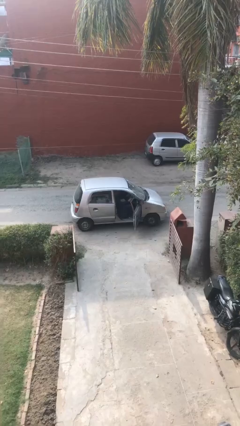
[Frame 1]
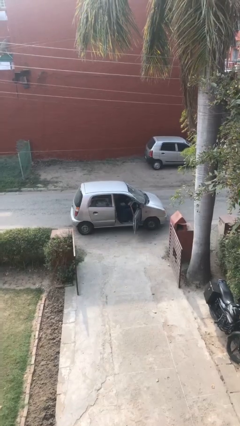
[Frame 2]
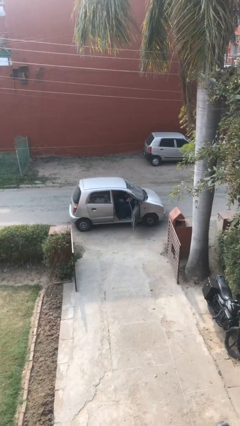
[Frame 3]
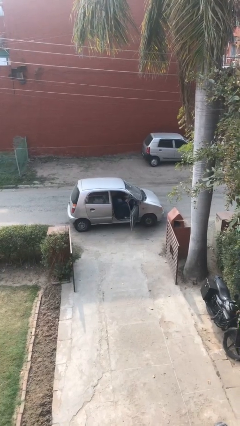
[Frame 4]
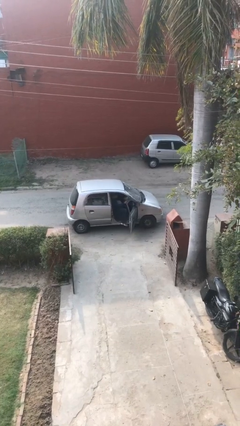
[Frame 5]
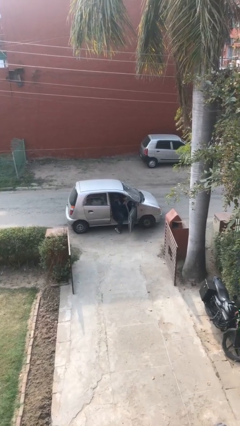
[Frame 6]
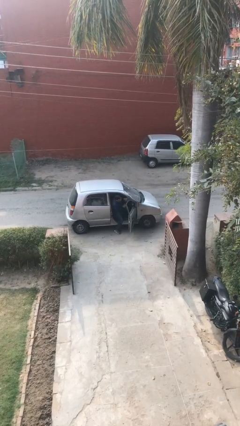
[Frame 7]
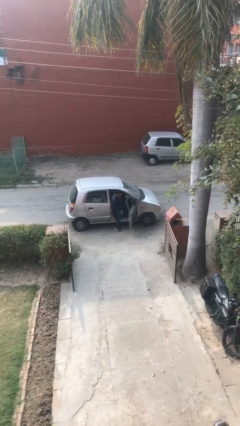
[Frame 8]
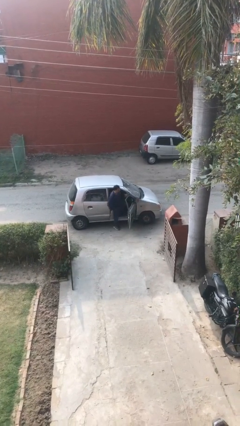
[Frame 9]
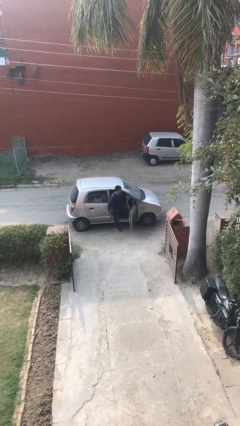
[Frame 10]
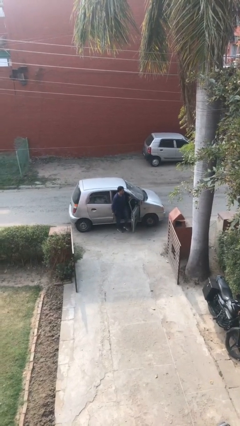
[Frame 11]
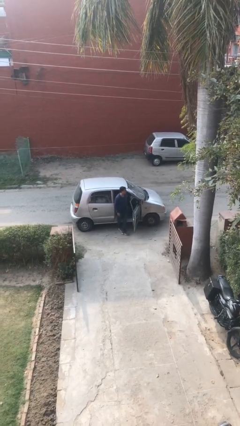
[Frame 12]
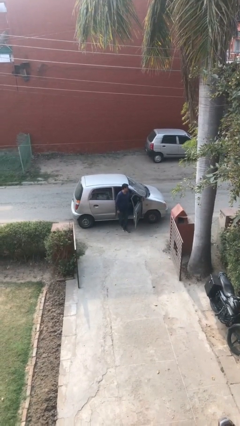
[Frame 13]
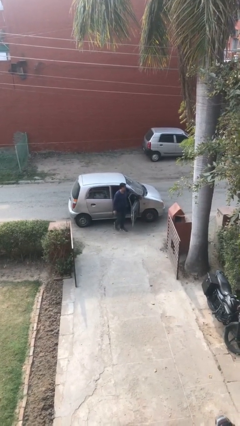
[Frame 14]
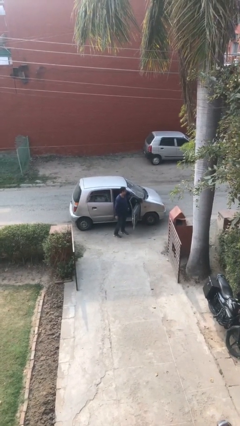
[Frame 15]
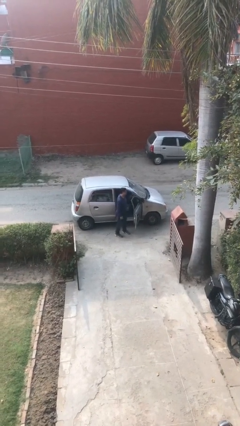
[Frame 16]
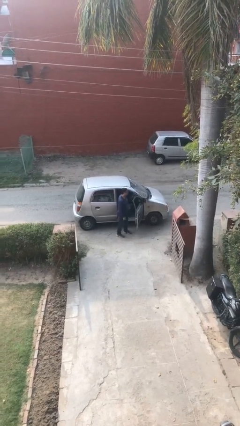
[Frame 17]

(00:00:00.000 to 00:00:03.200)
person exits car

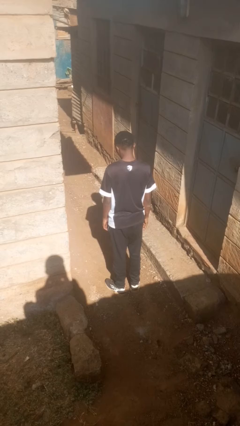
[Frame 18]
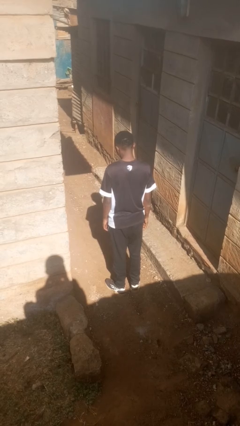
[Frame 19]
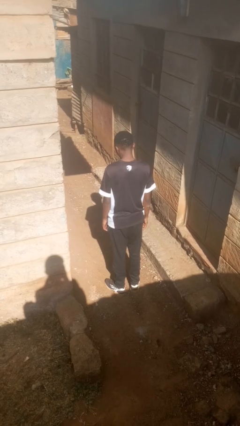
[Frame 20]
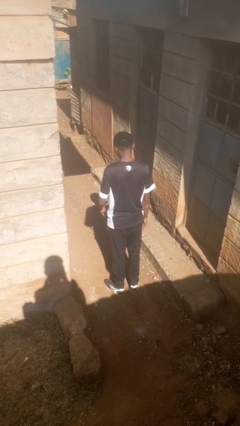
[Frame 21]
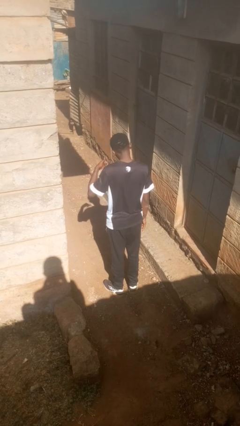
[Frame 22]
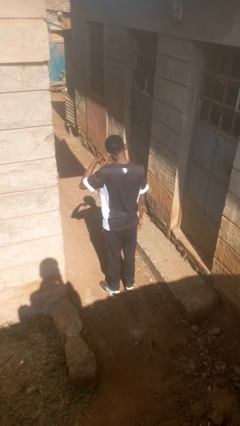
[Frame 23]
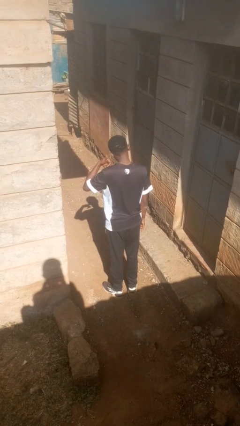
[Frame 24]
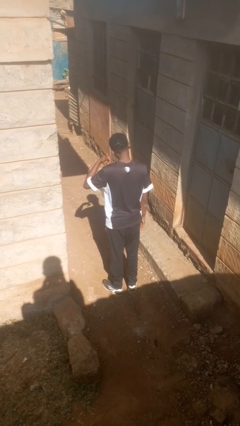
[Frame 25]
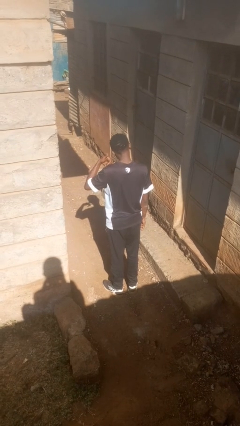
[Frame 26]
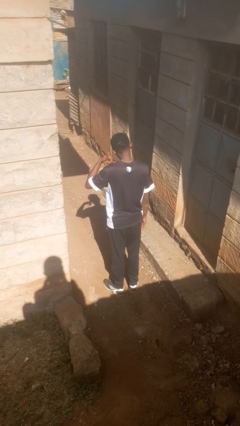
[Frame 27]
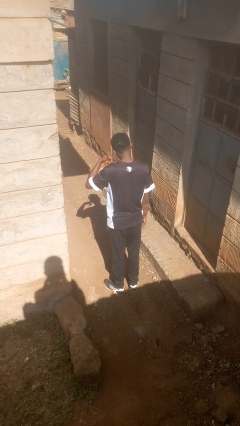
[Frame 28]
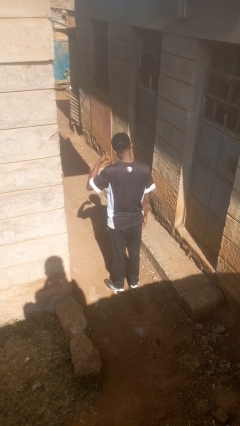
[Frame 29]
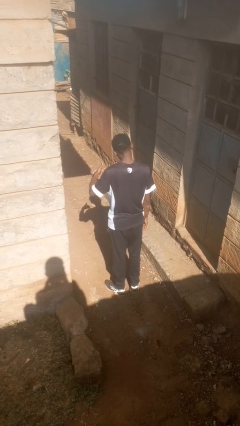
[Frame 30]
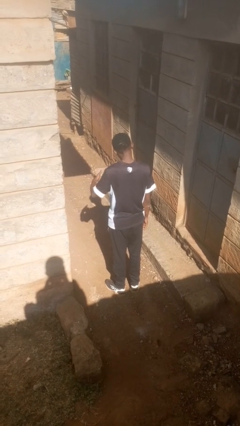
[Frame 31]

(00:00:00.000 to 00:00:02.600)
person gestures call me

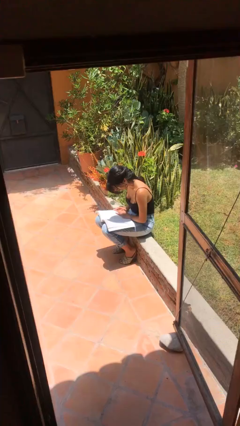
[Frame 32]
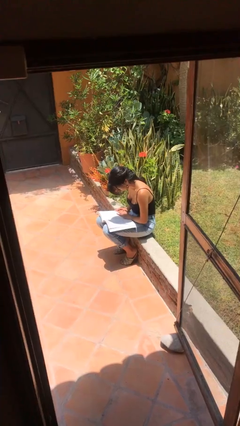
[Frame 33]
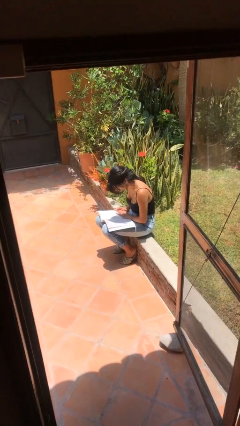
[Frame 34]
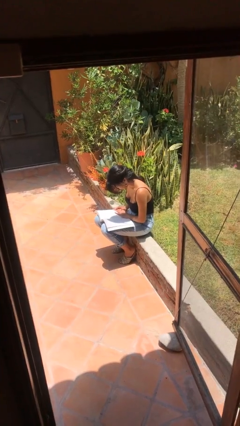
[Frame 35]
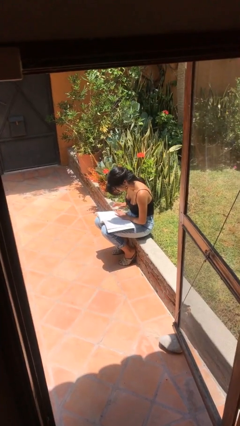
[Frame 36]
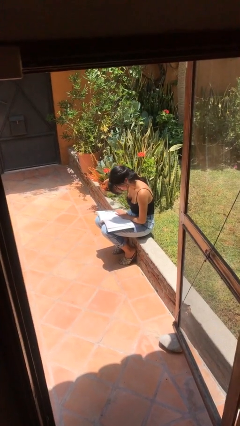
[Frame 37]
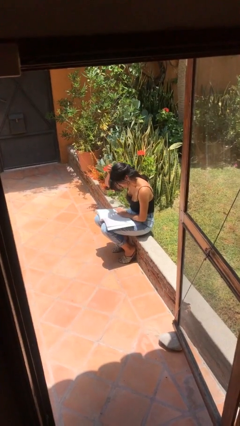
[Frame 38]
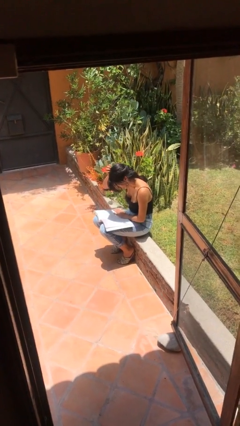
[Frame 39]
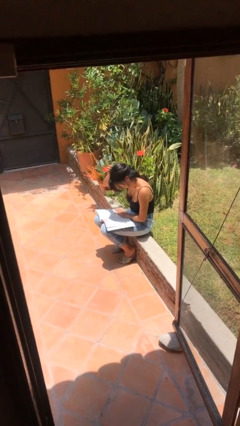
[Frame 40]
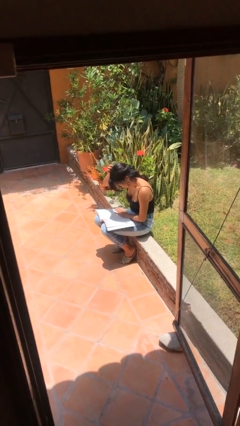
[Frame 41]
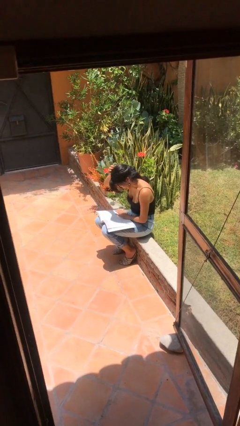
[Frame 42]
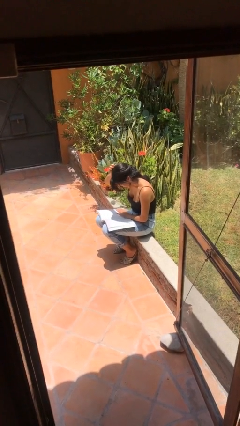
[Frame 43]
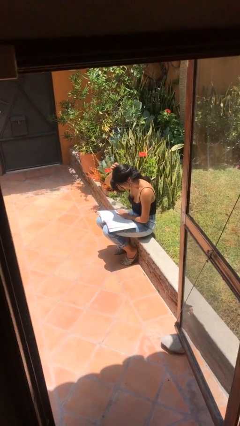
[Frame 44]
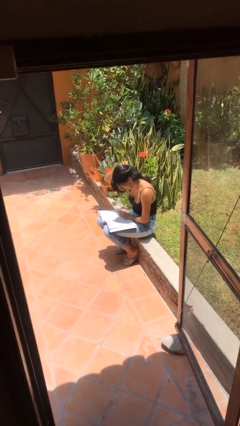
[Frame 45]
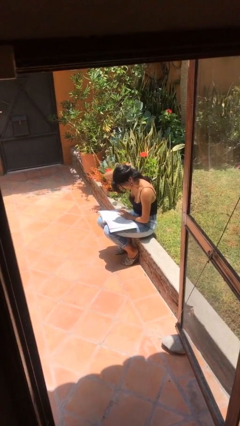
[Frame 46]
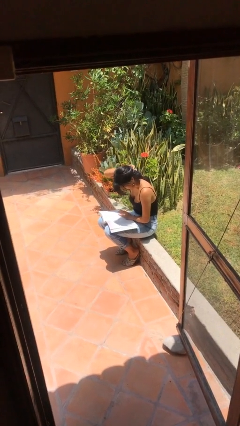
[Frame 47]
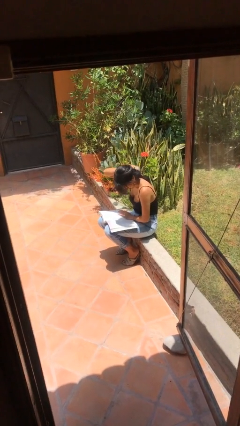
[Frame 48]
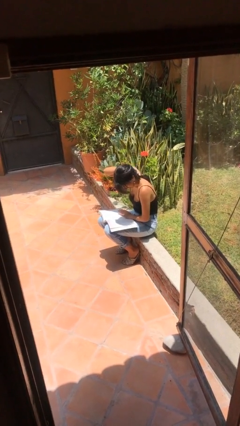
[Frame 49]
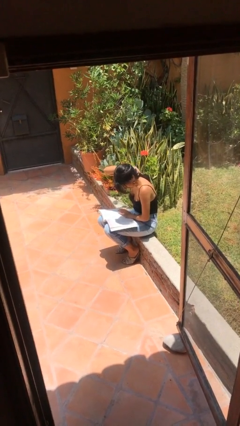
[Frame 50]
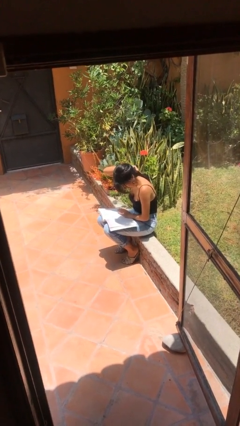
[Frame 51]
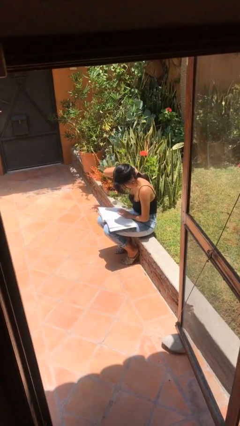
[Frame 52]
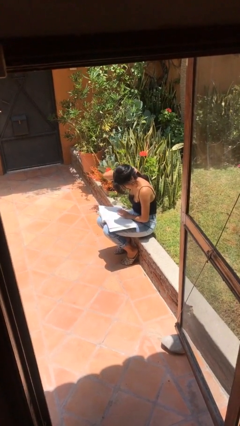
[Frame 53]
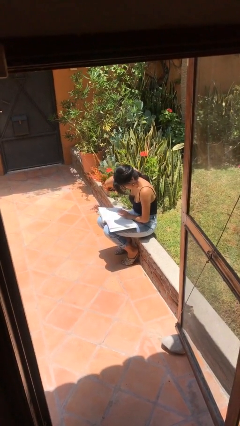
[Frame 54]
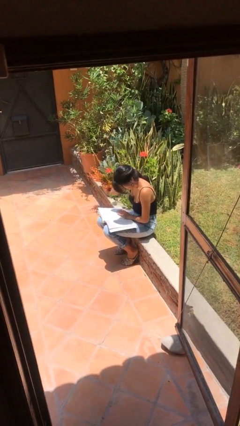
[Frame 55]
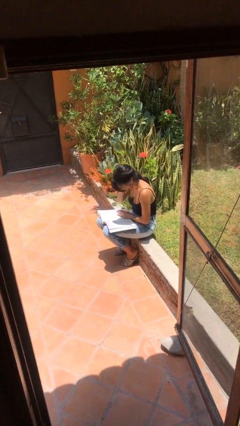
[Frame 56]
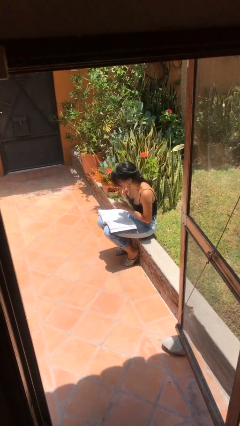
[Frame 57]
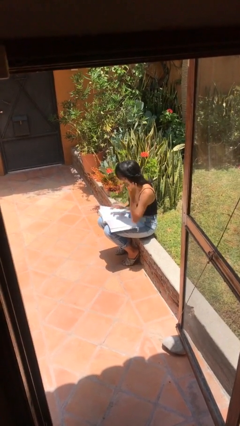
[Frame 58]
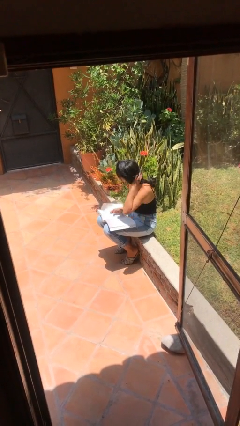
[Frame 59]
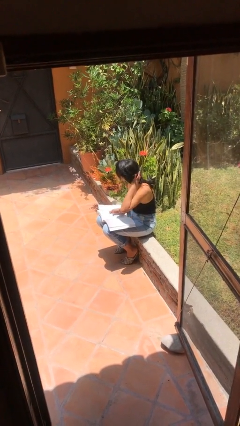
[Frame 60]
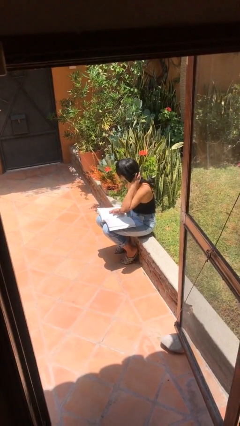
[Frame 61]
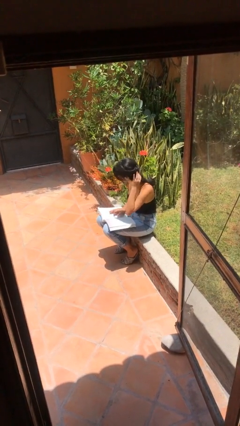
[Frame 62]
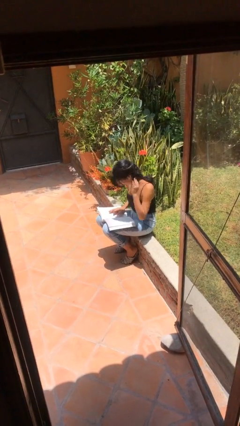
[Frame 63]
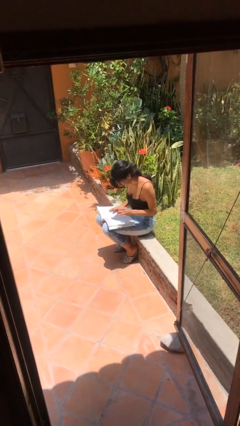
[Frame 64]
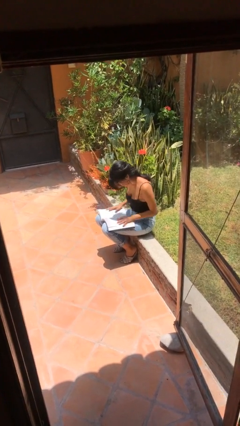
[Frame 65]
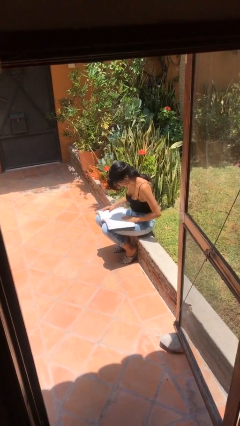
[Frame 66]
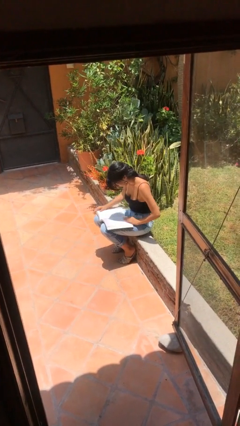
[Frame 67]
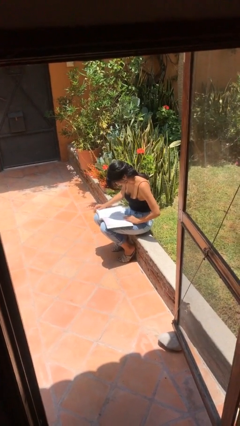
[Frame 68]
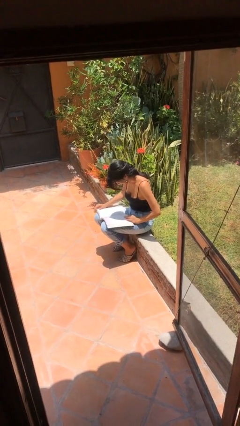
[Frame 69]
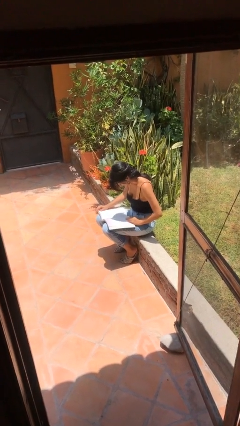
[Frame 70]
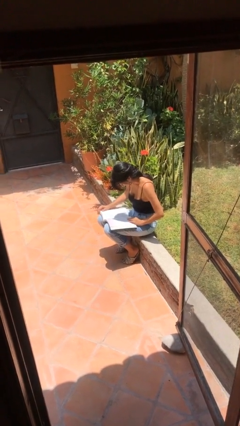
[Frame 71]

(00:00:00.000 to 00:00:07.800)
person reads document

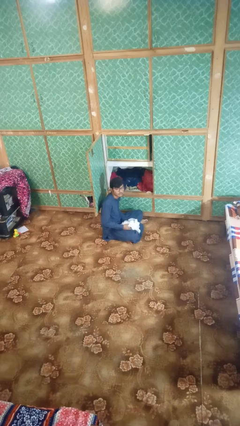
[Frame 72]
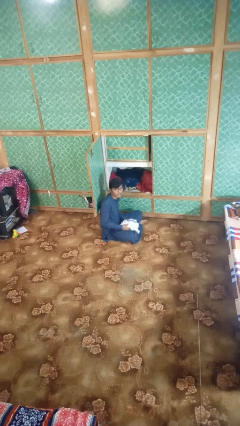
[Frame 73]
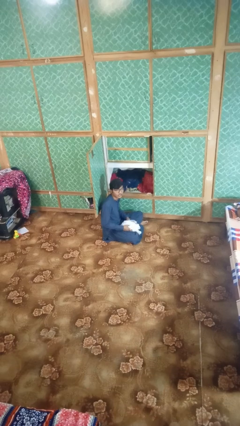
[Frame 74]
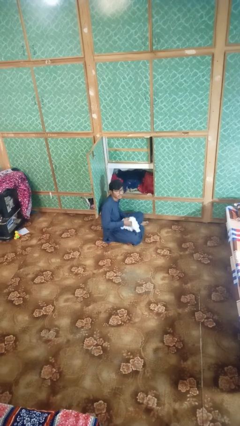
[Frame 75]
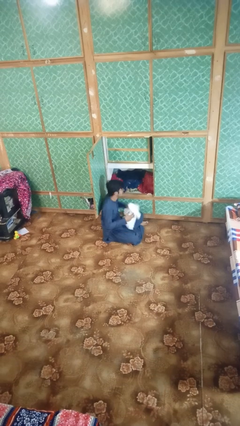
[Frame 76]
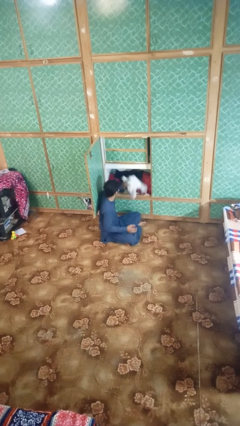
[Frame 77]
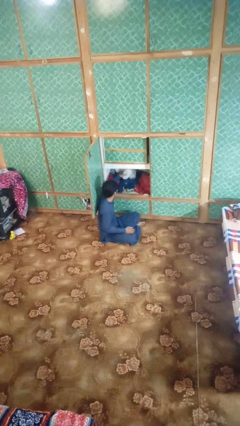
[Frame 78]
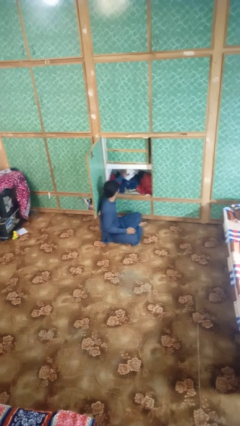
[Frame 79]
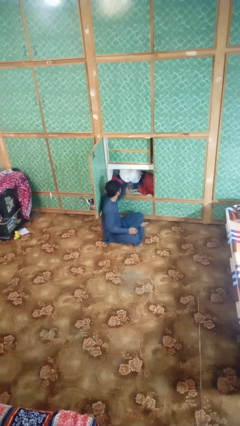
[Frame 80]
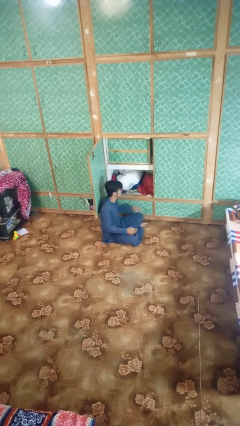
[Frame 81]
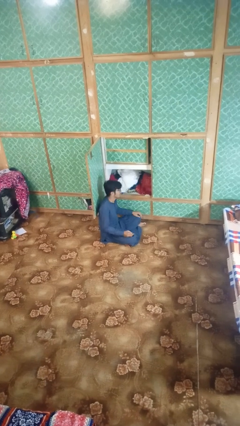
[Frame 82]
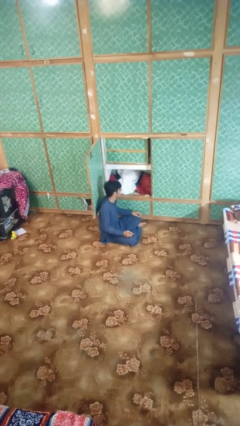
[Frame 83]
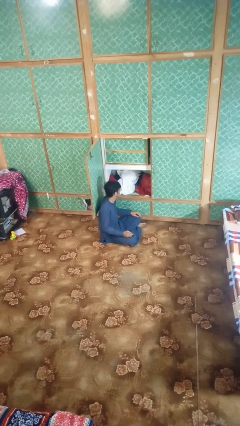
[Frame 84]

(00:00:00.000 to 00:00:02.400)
person puts clothes into dresser

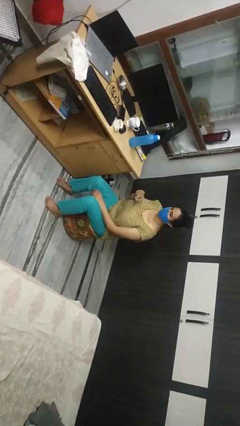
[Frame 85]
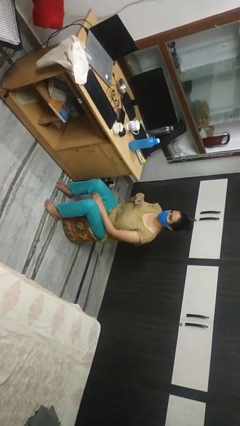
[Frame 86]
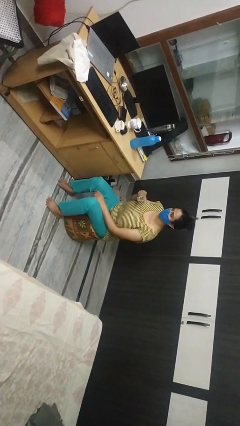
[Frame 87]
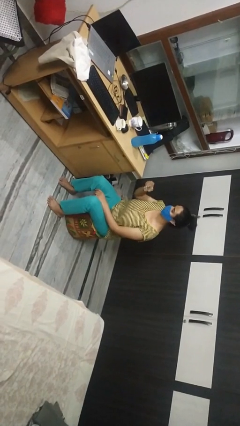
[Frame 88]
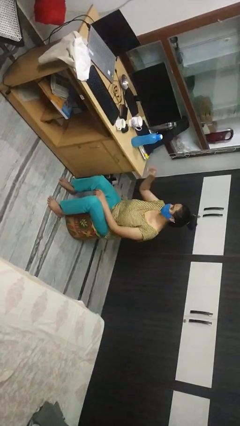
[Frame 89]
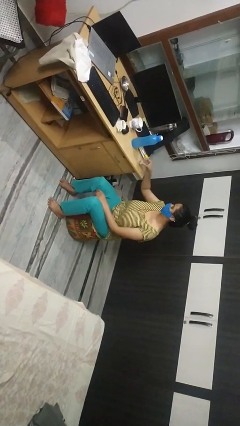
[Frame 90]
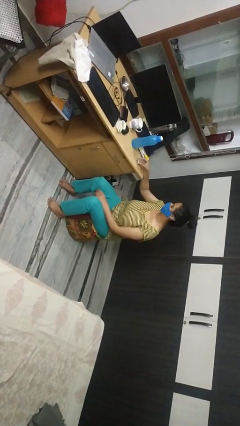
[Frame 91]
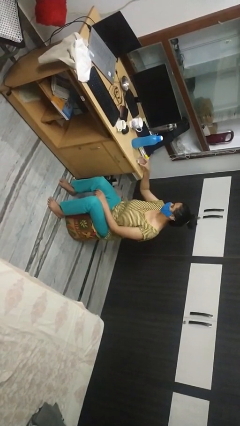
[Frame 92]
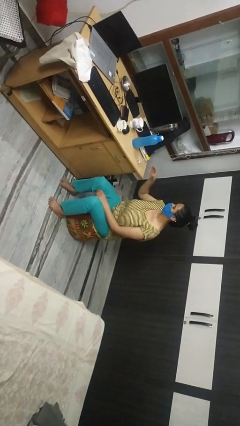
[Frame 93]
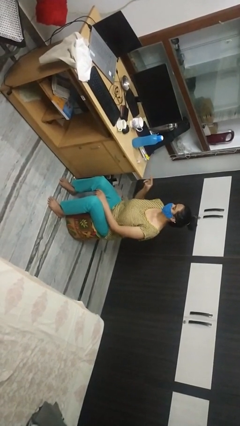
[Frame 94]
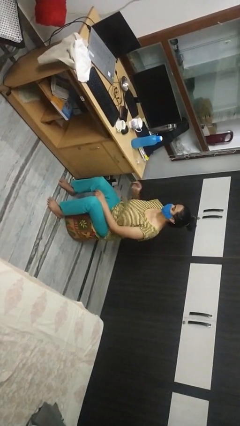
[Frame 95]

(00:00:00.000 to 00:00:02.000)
person puts down object on table
